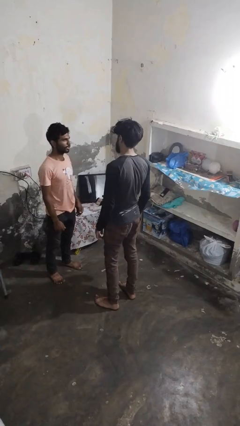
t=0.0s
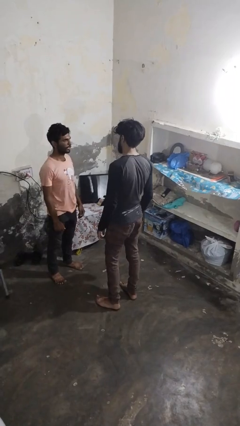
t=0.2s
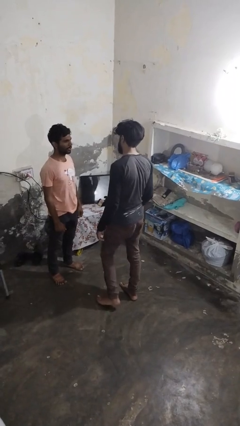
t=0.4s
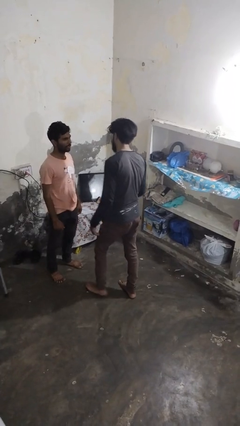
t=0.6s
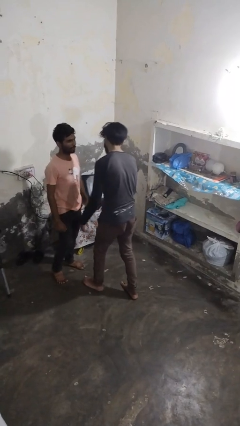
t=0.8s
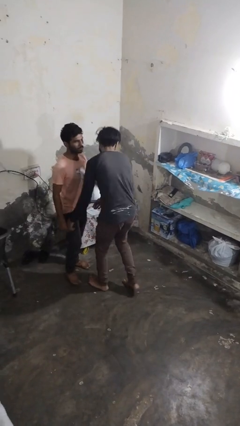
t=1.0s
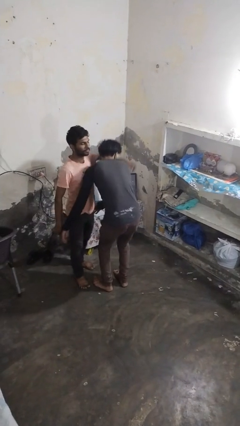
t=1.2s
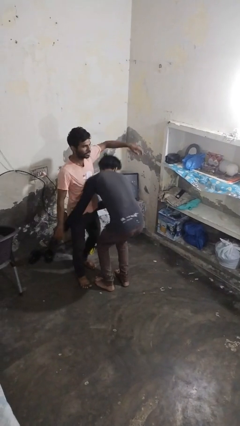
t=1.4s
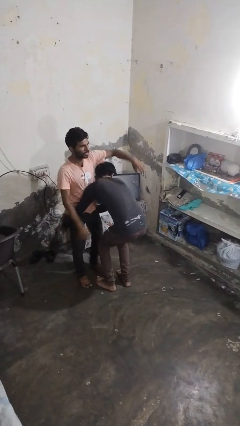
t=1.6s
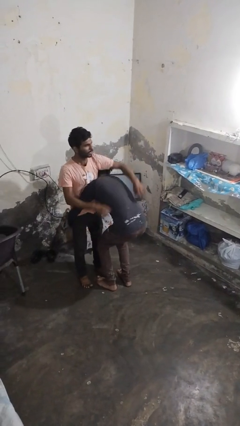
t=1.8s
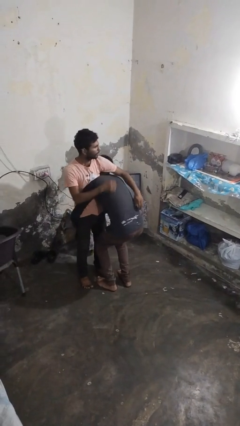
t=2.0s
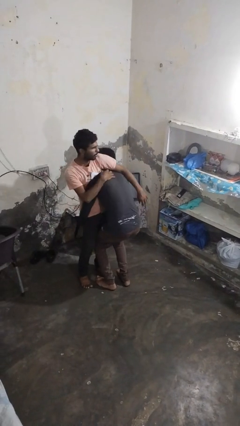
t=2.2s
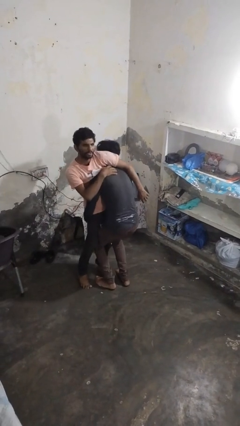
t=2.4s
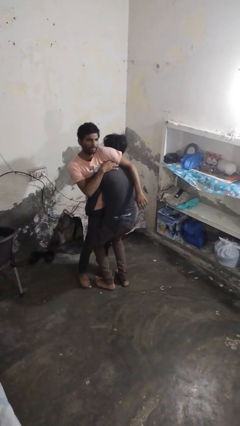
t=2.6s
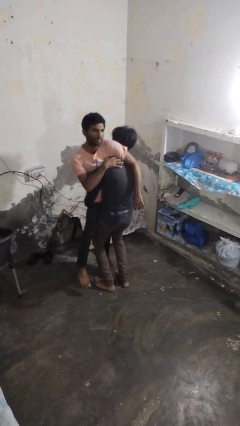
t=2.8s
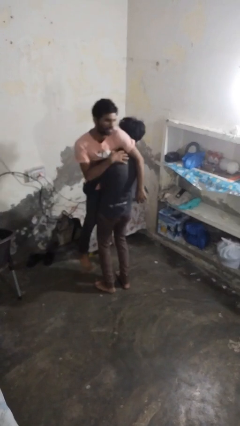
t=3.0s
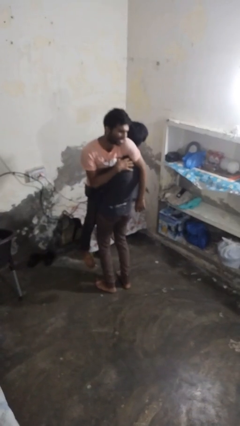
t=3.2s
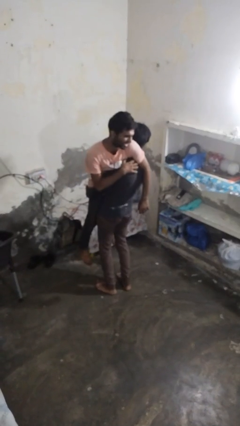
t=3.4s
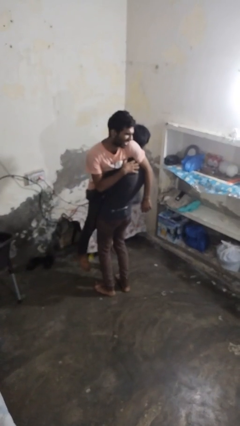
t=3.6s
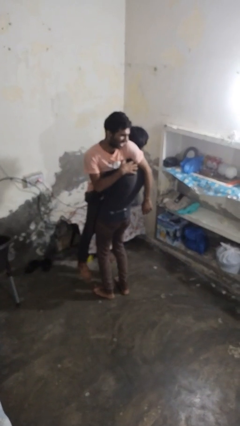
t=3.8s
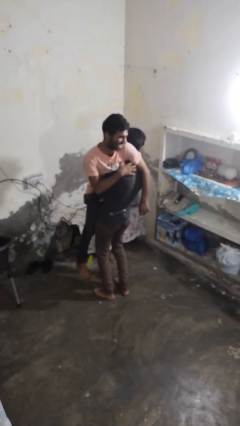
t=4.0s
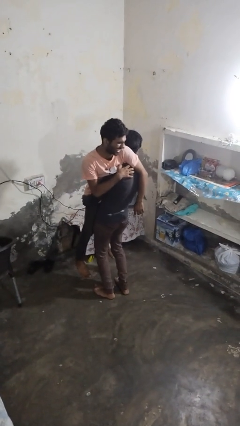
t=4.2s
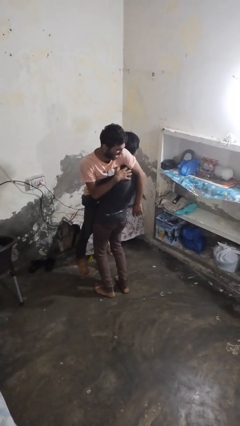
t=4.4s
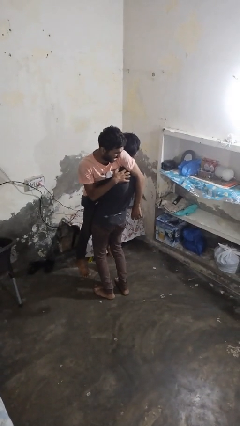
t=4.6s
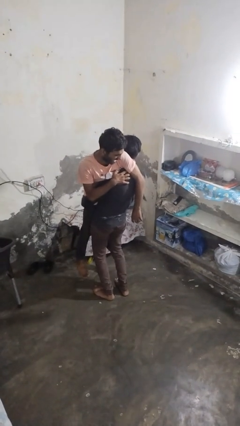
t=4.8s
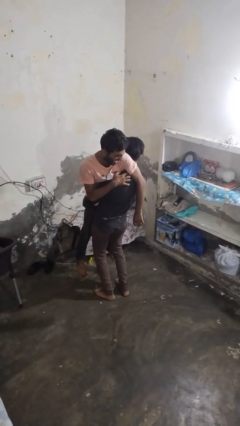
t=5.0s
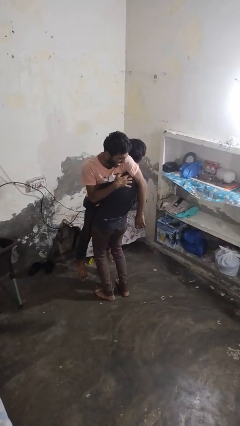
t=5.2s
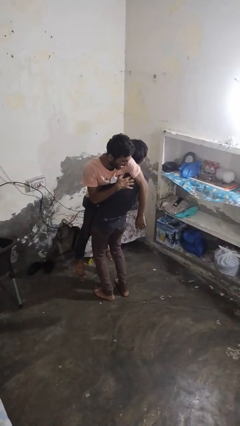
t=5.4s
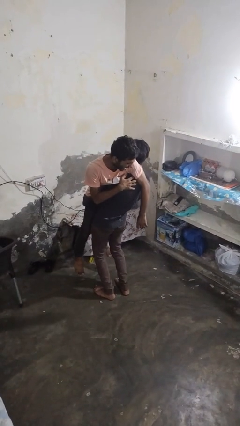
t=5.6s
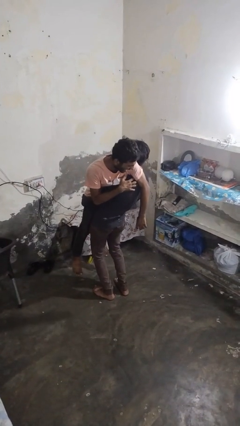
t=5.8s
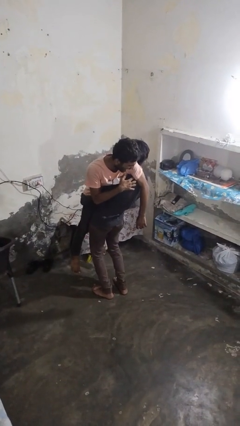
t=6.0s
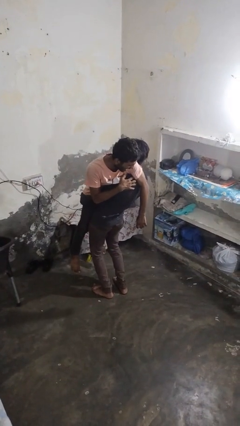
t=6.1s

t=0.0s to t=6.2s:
person picks up person

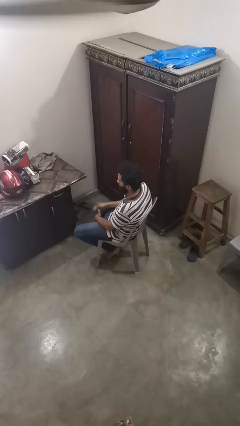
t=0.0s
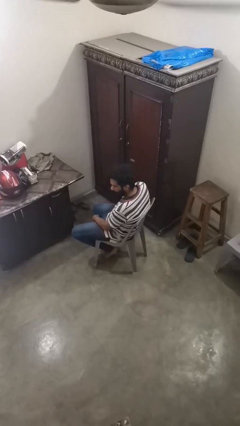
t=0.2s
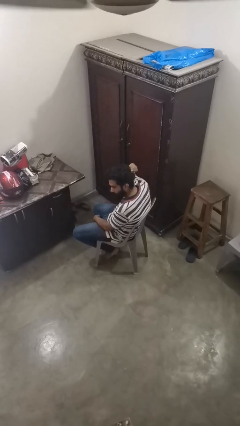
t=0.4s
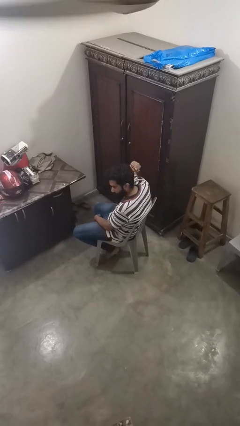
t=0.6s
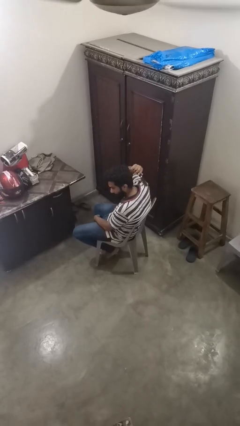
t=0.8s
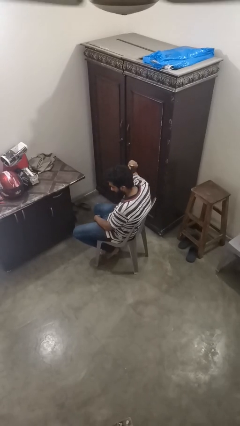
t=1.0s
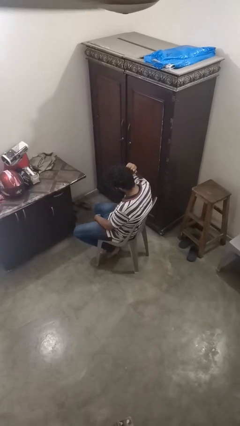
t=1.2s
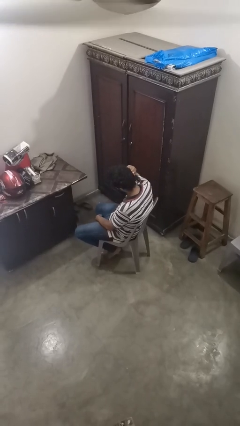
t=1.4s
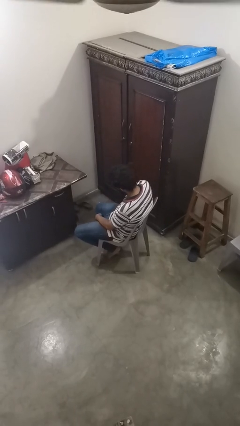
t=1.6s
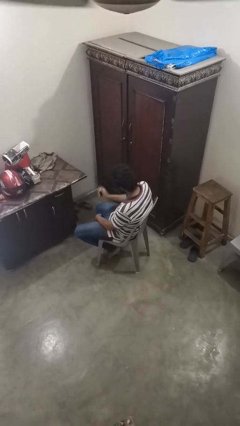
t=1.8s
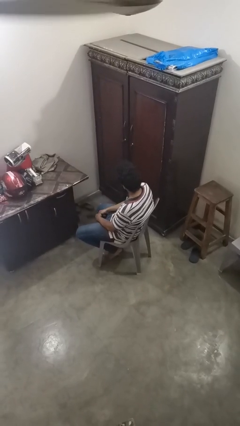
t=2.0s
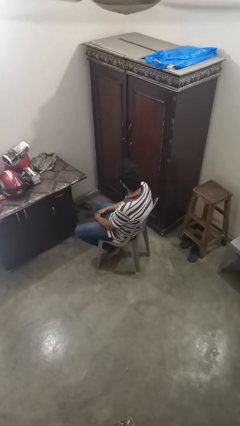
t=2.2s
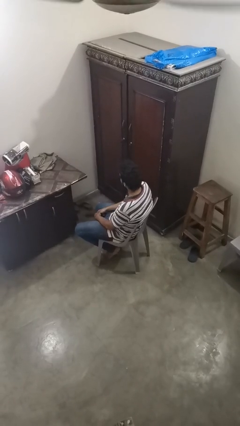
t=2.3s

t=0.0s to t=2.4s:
person brushes hair

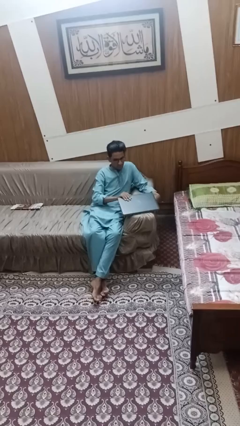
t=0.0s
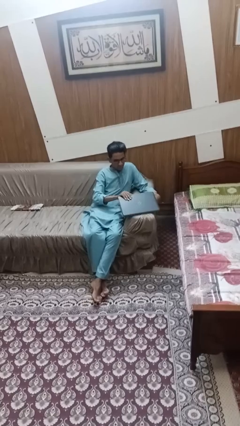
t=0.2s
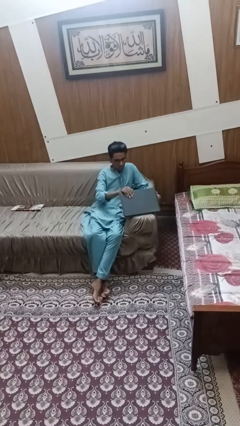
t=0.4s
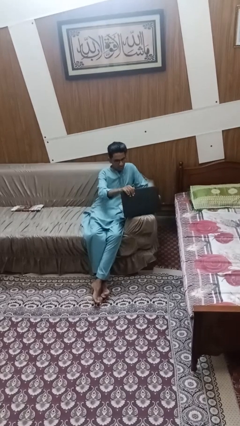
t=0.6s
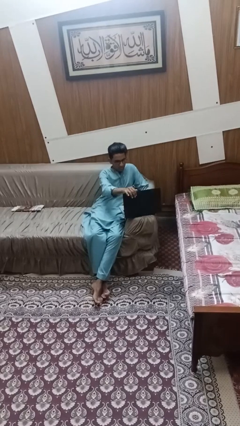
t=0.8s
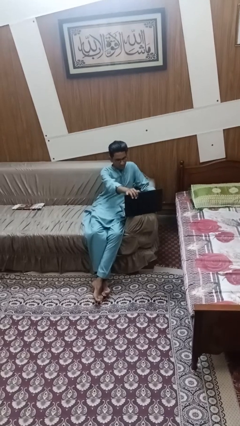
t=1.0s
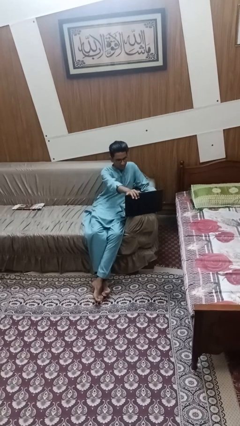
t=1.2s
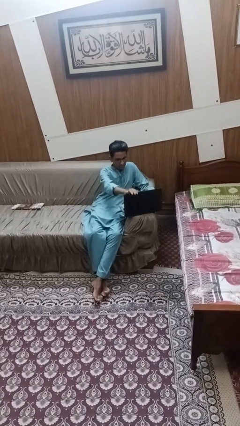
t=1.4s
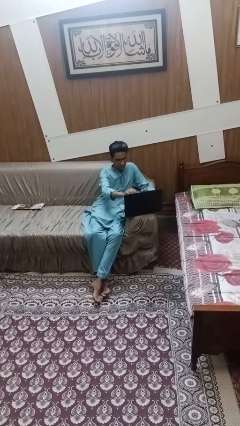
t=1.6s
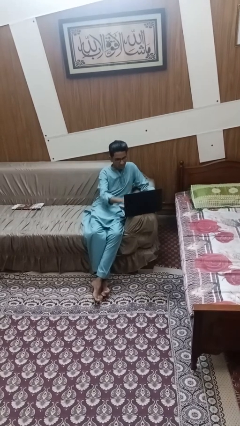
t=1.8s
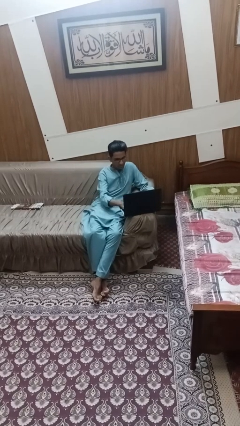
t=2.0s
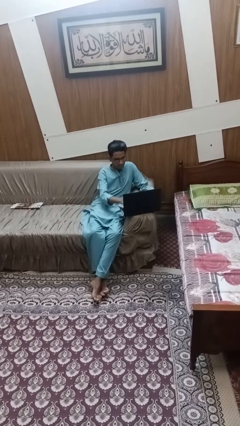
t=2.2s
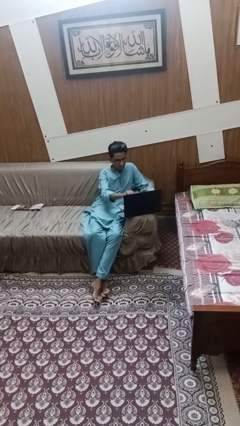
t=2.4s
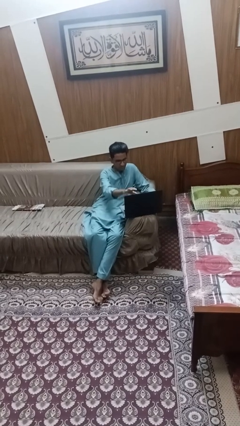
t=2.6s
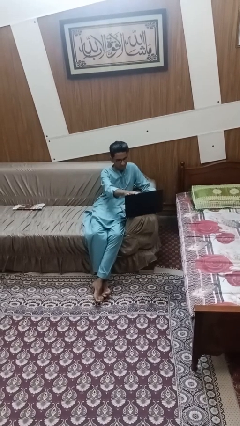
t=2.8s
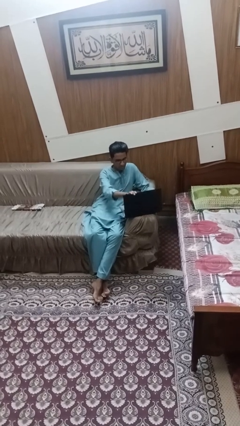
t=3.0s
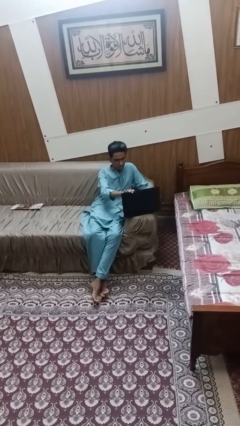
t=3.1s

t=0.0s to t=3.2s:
person opens laptop

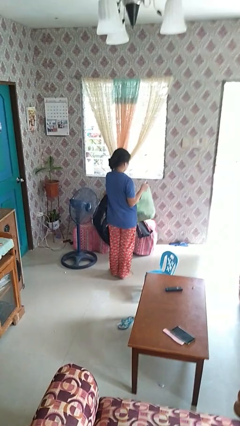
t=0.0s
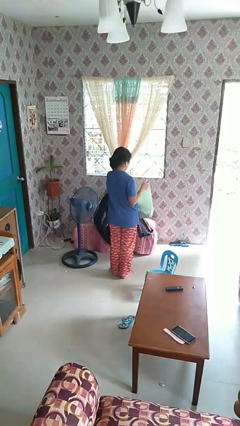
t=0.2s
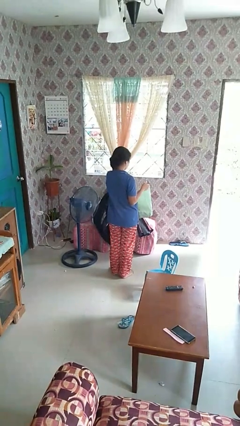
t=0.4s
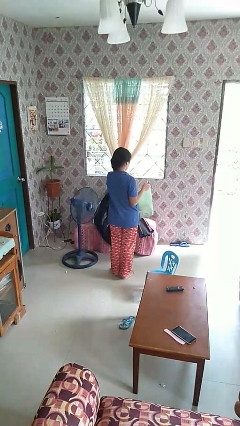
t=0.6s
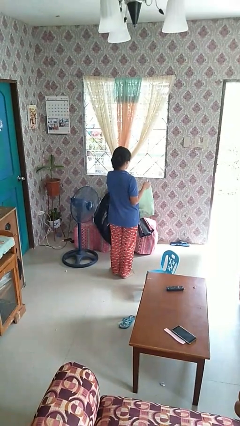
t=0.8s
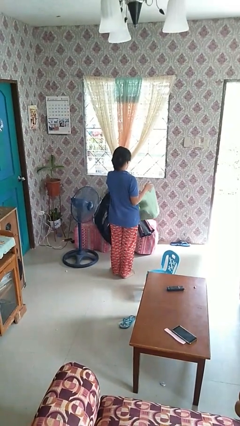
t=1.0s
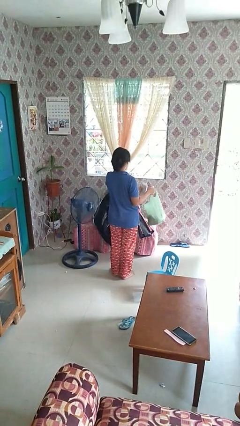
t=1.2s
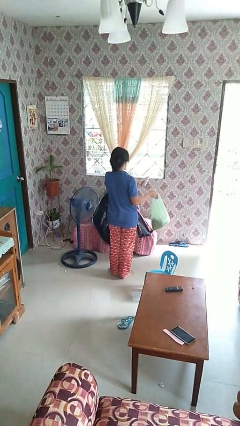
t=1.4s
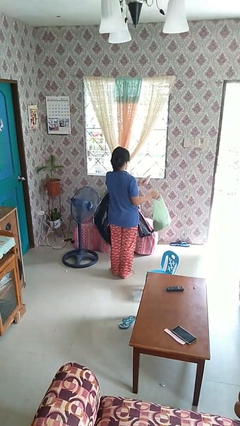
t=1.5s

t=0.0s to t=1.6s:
person takes object from bag

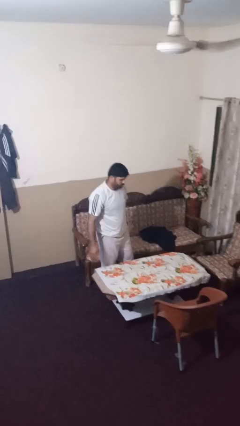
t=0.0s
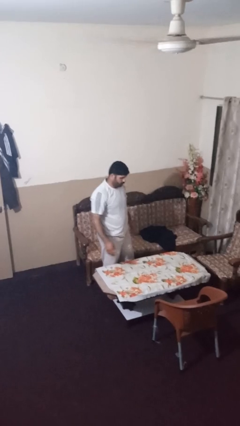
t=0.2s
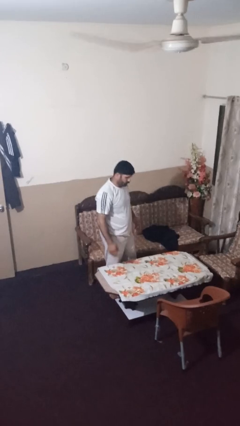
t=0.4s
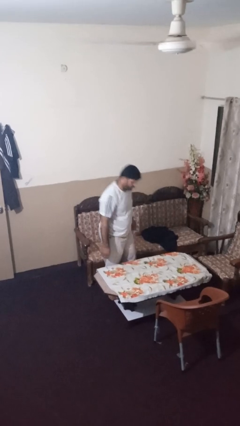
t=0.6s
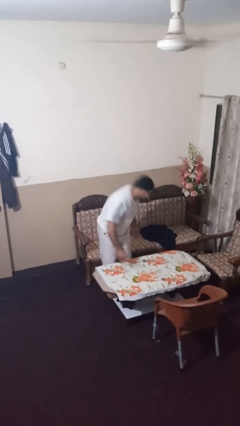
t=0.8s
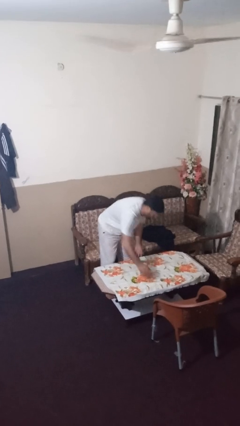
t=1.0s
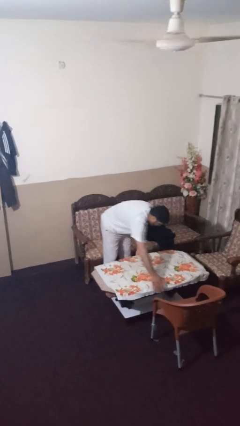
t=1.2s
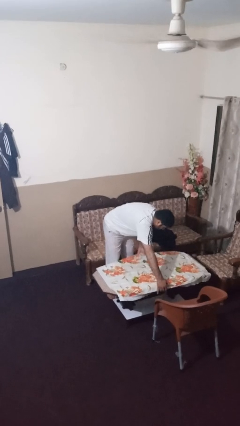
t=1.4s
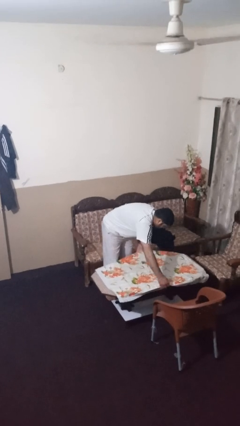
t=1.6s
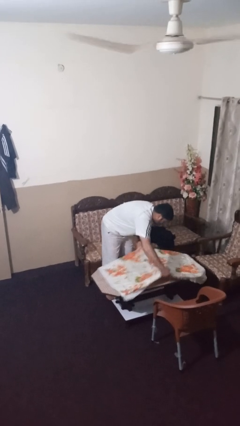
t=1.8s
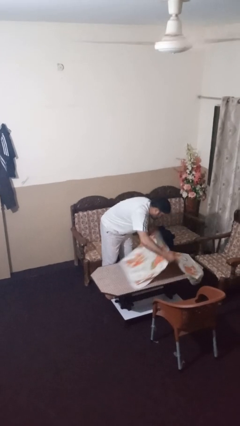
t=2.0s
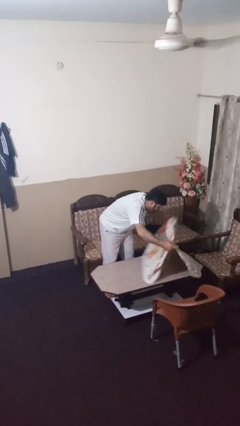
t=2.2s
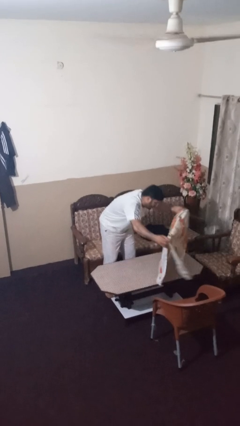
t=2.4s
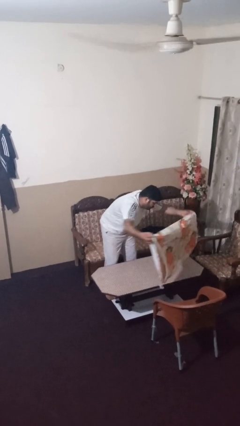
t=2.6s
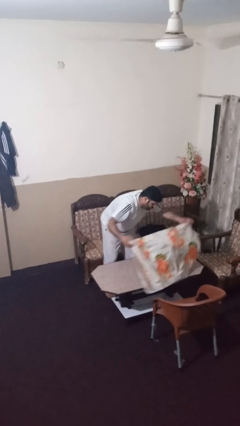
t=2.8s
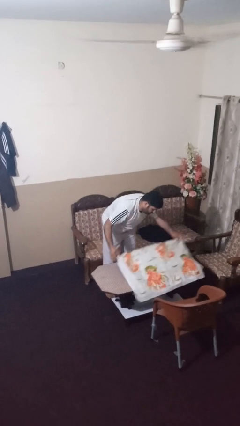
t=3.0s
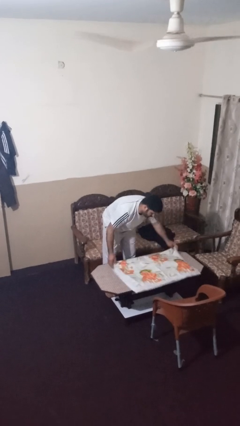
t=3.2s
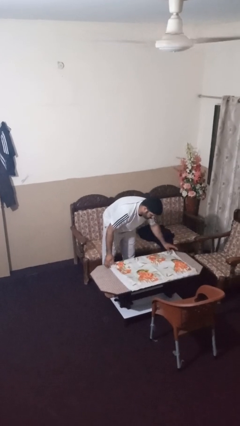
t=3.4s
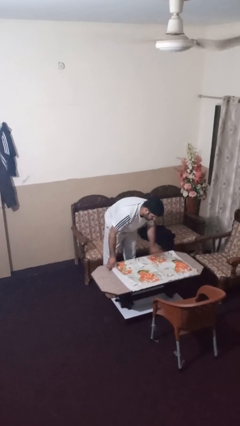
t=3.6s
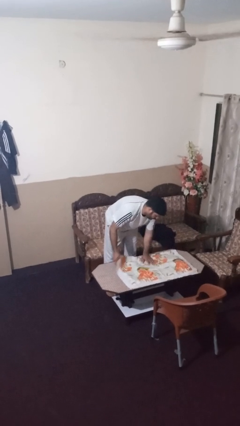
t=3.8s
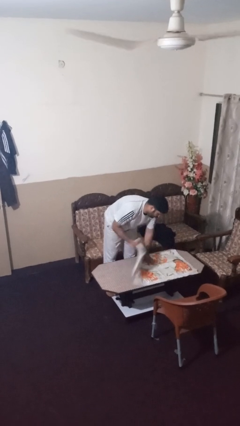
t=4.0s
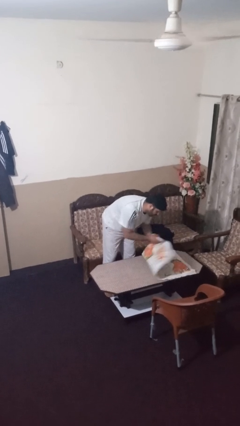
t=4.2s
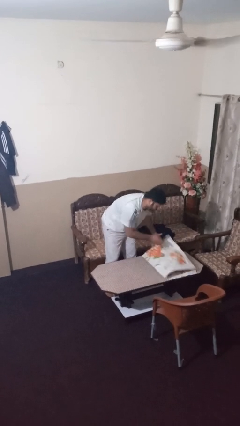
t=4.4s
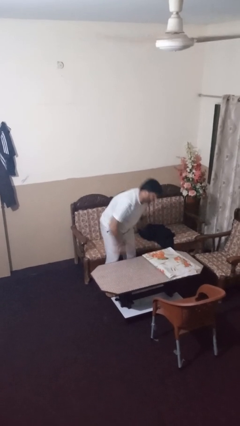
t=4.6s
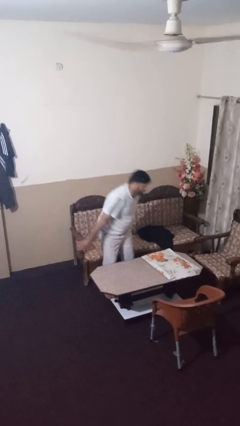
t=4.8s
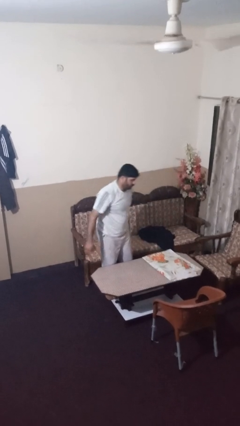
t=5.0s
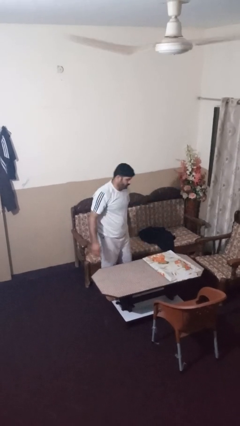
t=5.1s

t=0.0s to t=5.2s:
person folds tablecloth
